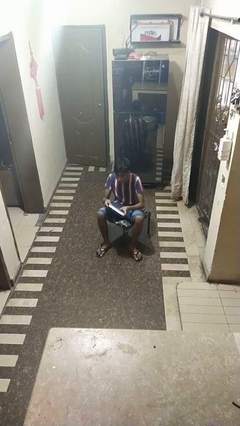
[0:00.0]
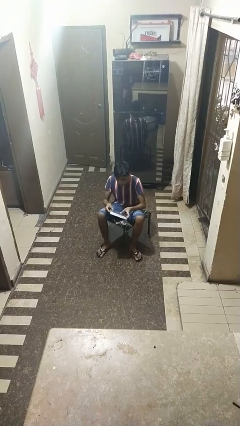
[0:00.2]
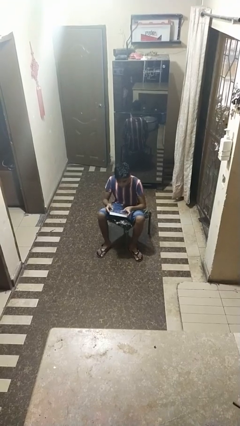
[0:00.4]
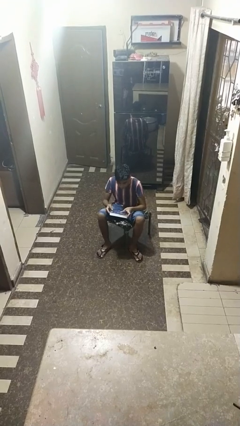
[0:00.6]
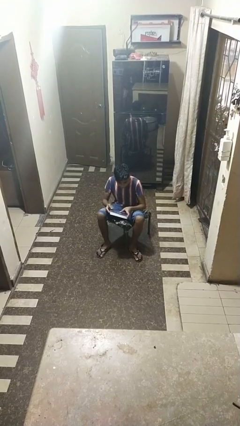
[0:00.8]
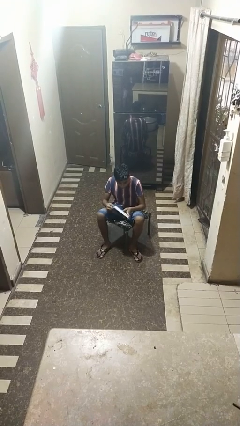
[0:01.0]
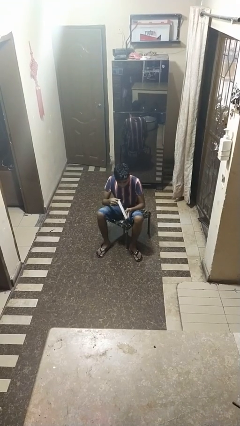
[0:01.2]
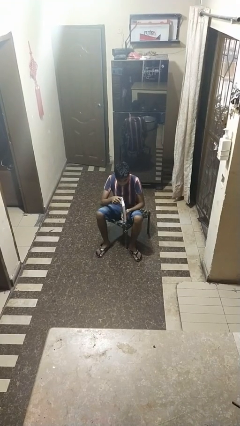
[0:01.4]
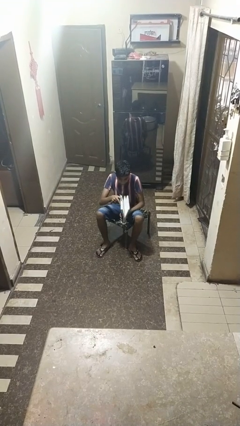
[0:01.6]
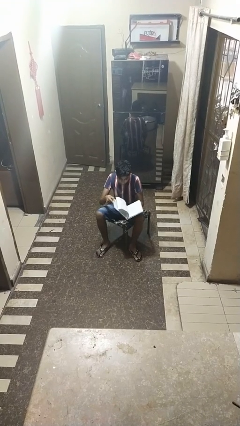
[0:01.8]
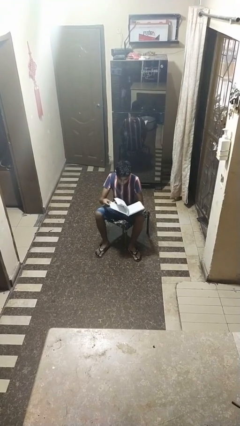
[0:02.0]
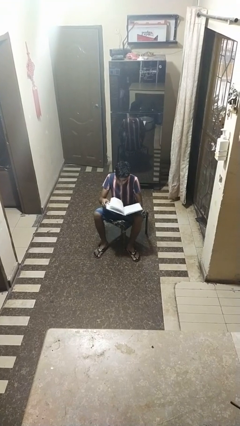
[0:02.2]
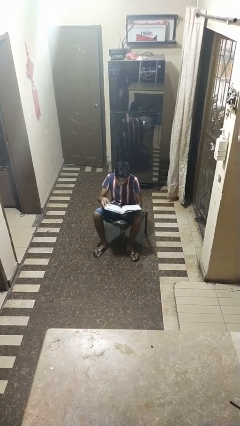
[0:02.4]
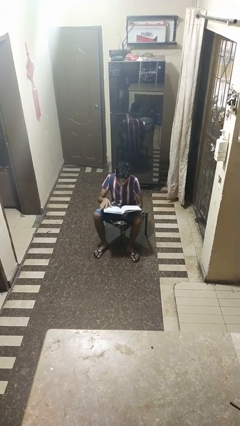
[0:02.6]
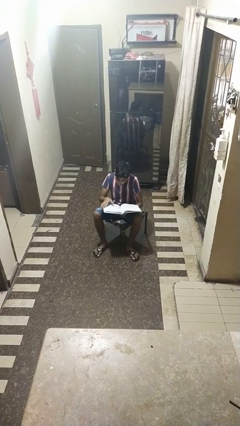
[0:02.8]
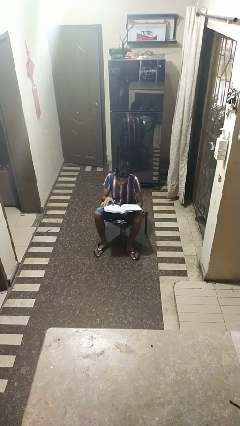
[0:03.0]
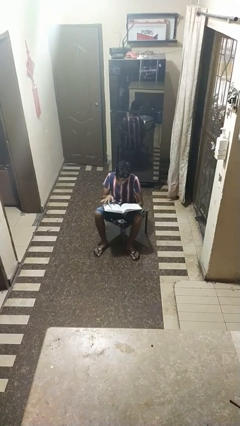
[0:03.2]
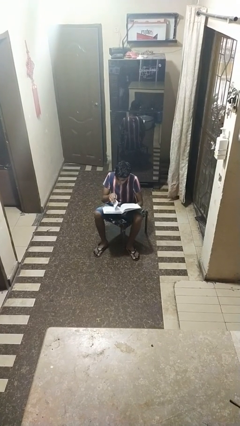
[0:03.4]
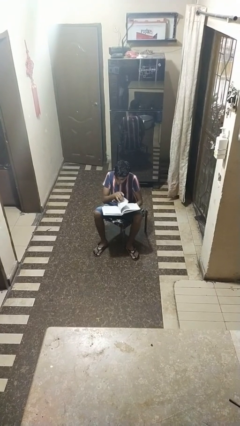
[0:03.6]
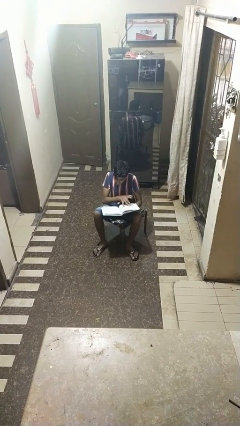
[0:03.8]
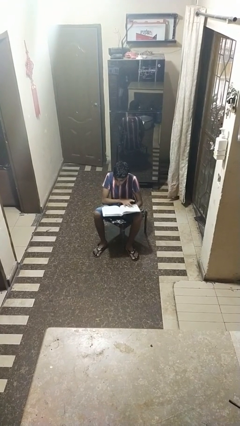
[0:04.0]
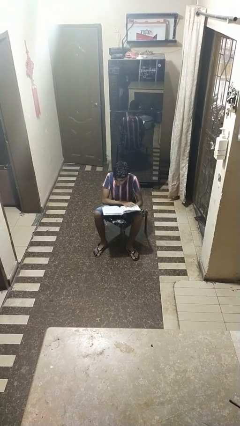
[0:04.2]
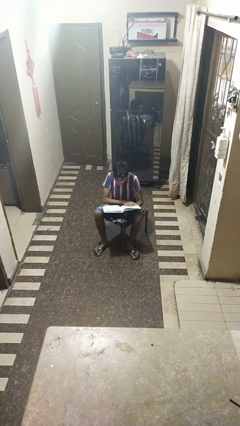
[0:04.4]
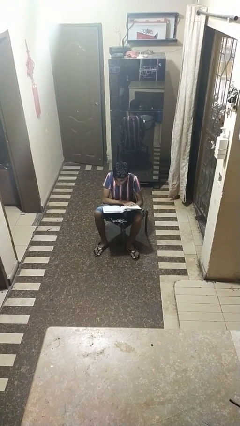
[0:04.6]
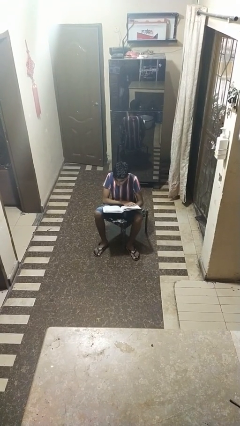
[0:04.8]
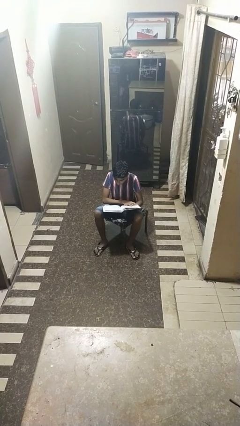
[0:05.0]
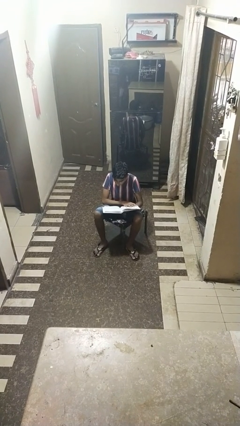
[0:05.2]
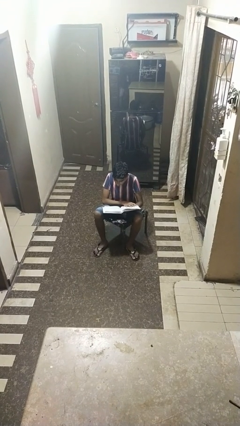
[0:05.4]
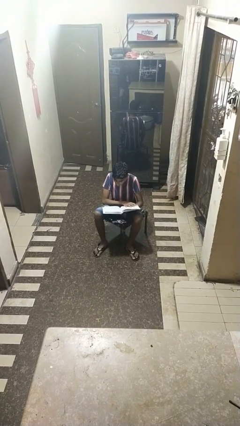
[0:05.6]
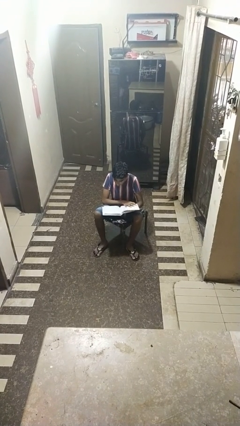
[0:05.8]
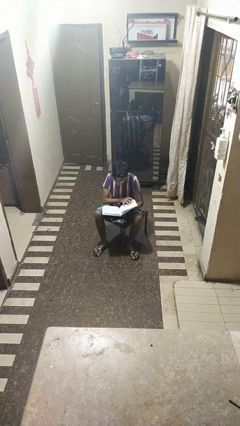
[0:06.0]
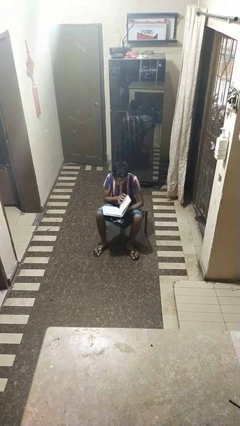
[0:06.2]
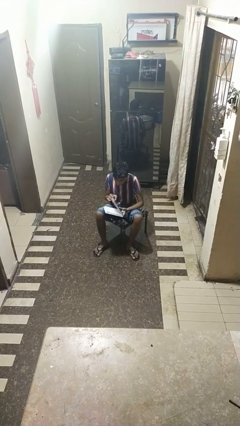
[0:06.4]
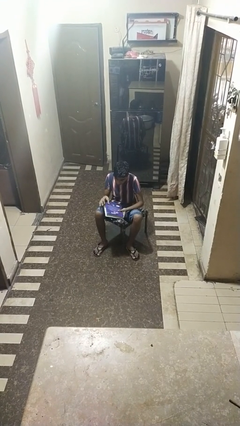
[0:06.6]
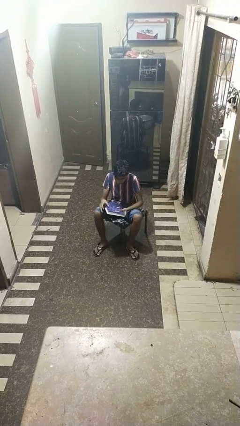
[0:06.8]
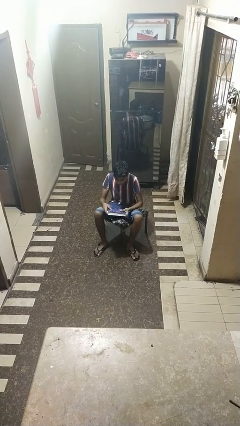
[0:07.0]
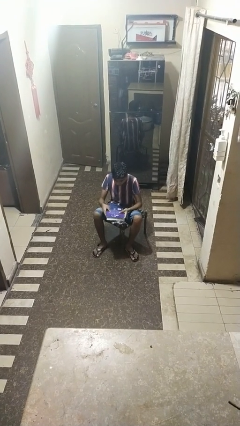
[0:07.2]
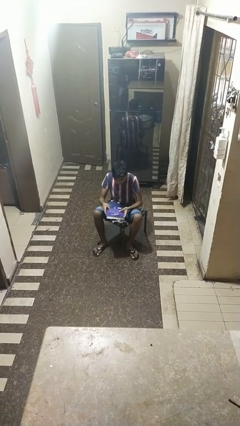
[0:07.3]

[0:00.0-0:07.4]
person reads book

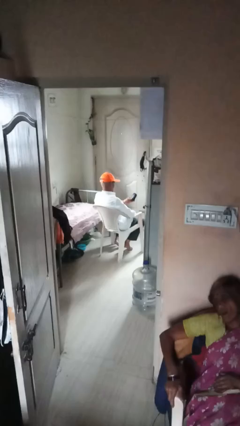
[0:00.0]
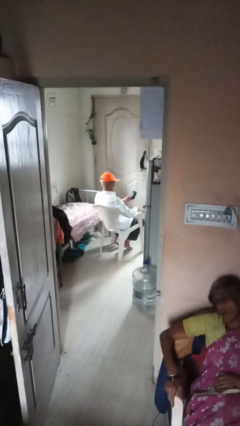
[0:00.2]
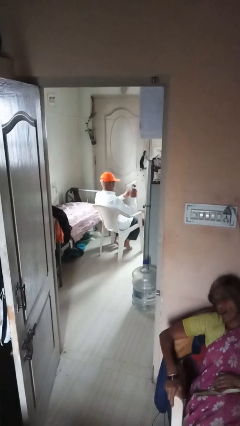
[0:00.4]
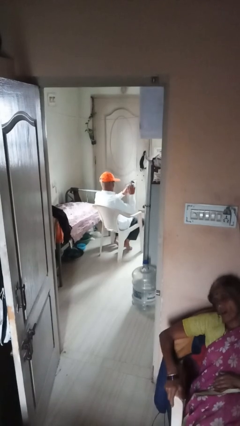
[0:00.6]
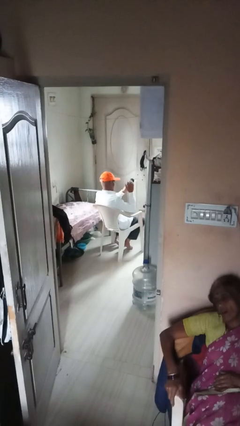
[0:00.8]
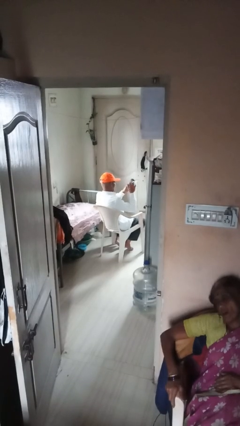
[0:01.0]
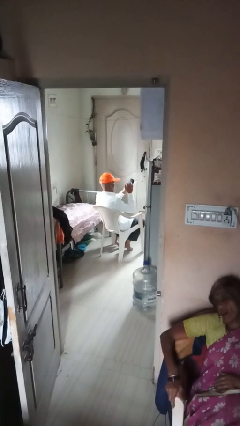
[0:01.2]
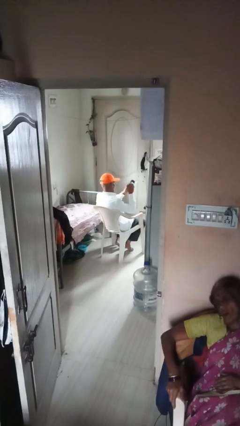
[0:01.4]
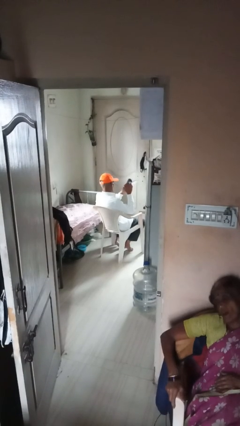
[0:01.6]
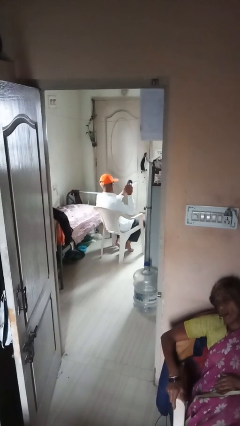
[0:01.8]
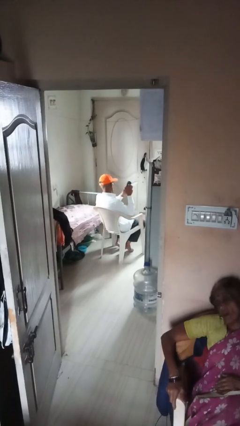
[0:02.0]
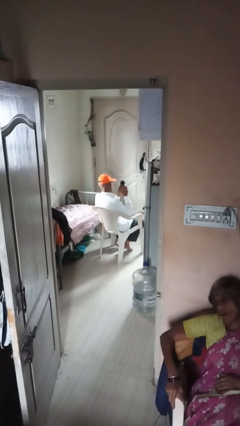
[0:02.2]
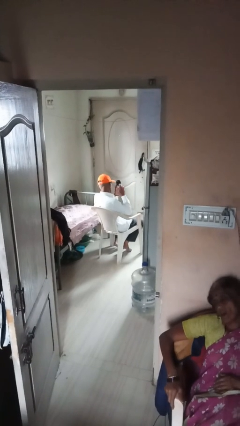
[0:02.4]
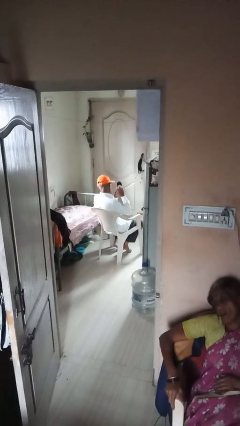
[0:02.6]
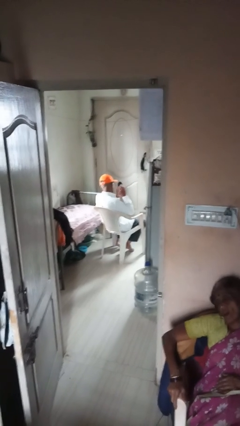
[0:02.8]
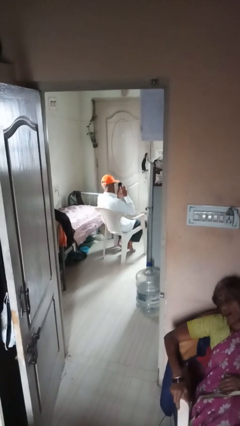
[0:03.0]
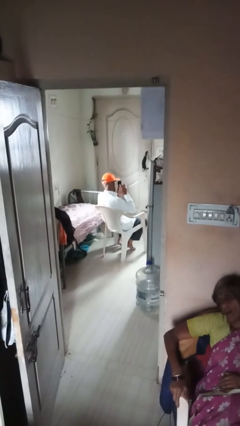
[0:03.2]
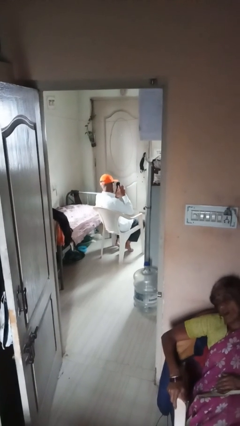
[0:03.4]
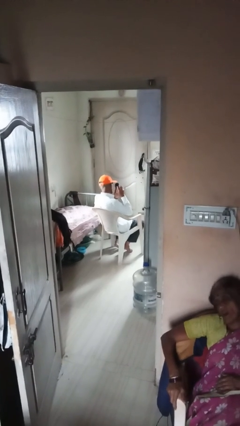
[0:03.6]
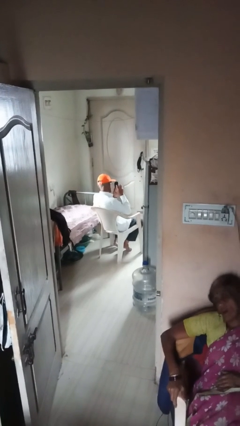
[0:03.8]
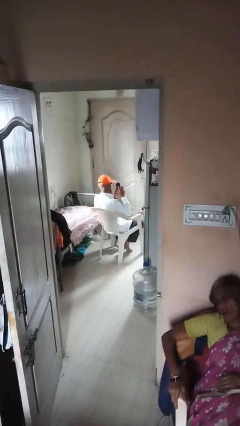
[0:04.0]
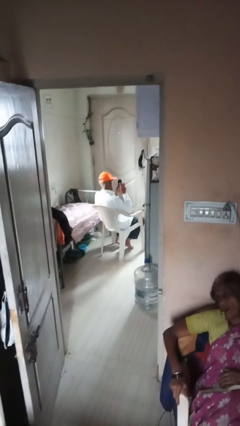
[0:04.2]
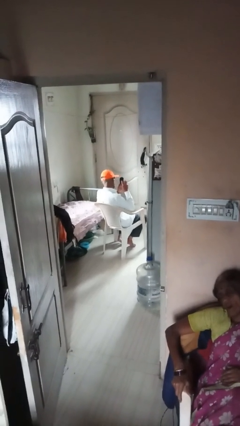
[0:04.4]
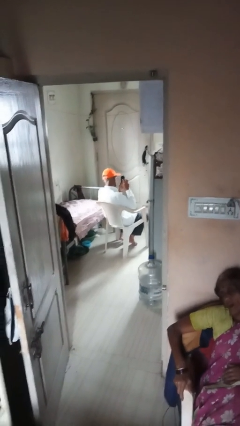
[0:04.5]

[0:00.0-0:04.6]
person taps object with finger

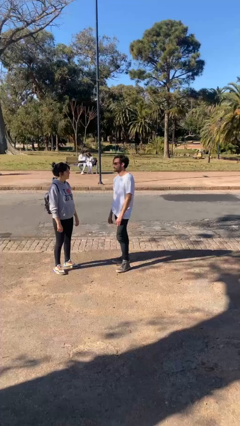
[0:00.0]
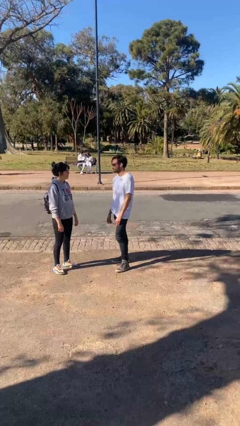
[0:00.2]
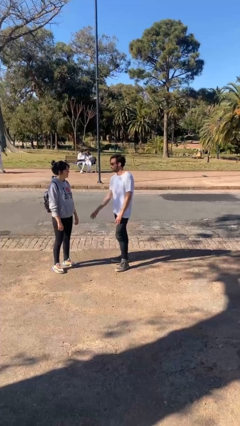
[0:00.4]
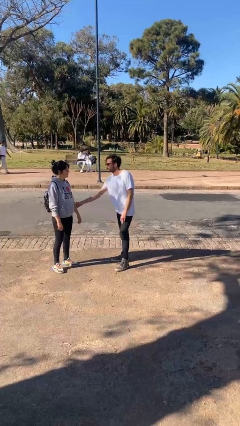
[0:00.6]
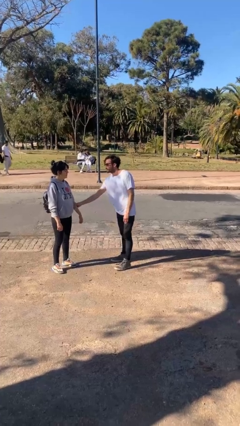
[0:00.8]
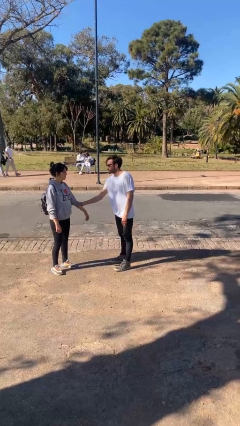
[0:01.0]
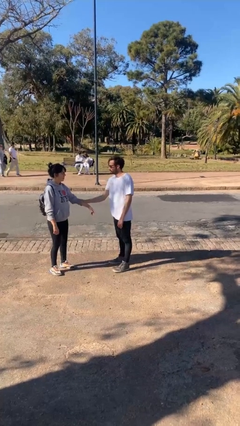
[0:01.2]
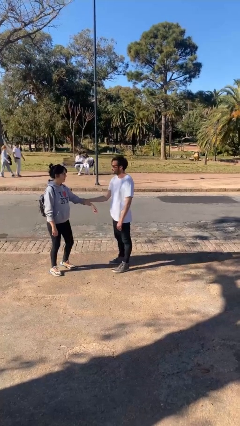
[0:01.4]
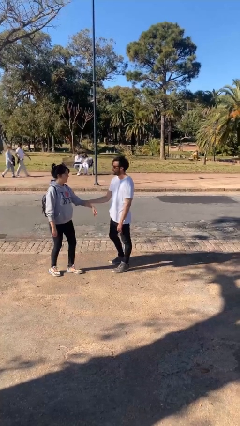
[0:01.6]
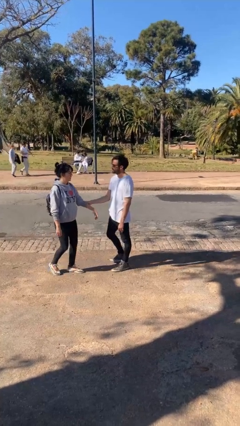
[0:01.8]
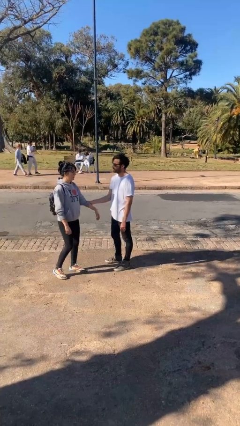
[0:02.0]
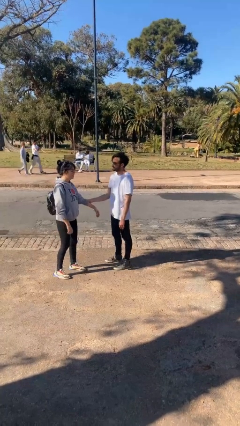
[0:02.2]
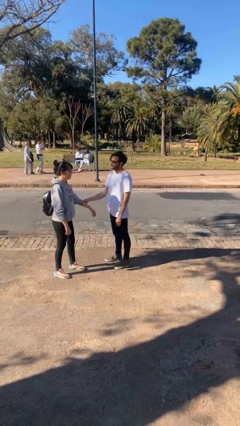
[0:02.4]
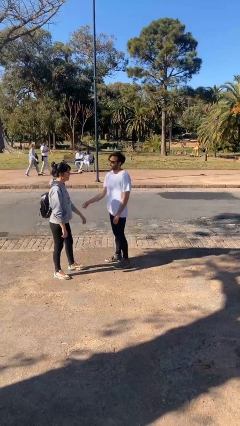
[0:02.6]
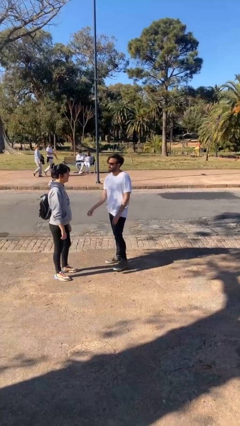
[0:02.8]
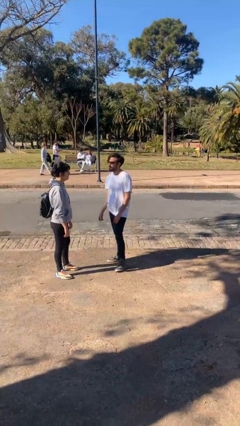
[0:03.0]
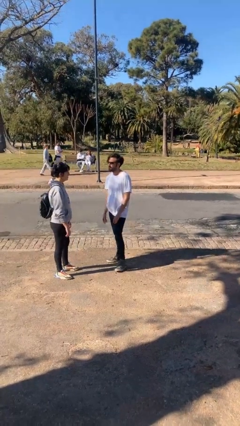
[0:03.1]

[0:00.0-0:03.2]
person grabs person by forearm

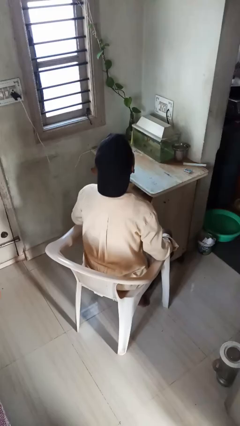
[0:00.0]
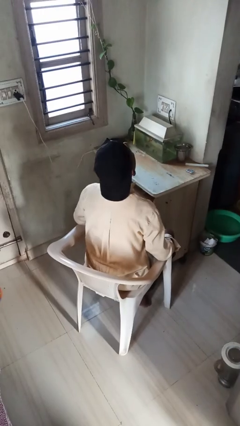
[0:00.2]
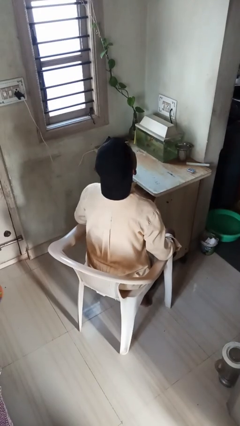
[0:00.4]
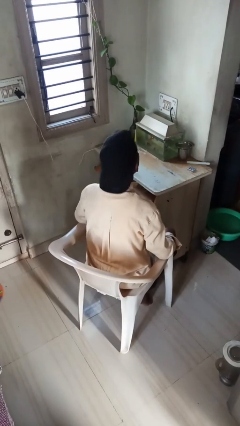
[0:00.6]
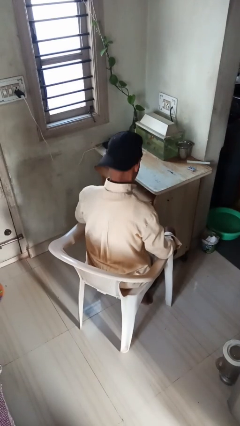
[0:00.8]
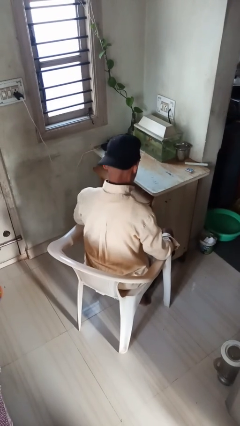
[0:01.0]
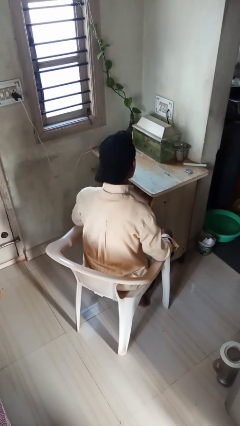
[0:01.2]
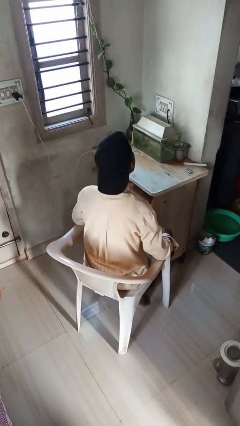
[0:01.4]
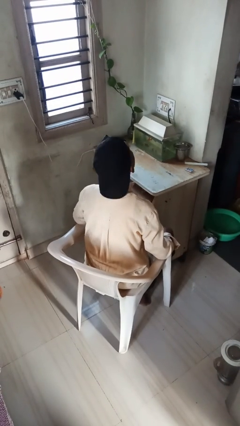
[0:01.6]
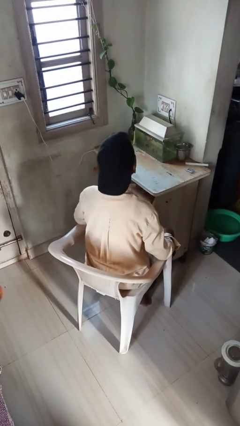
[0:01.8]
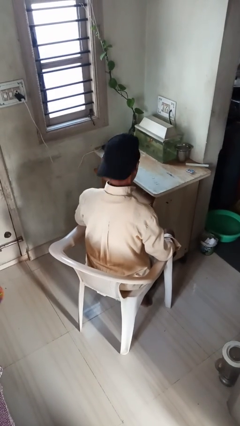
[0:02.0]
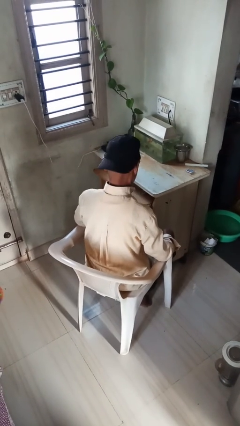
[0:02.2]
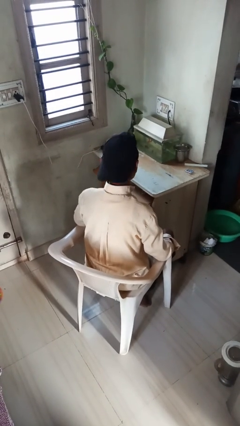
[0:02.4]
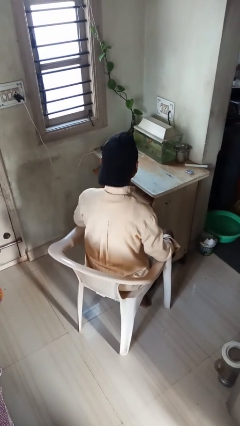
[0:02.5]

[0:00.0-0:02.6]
person nods head
